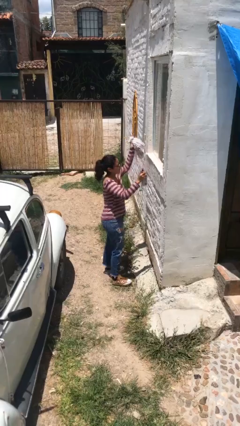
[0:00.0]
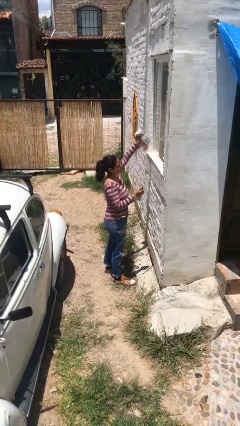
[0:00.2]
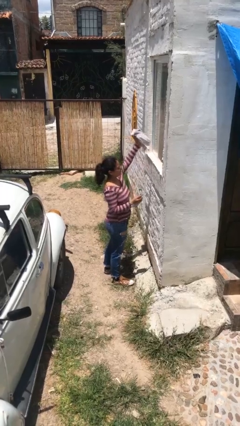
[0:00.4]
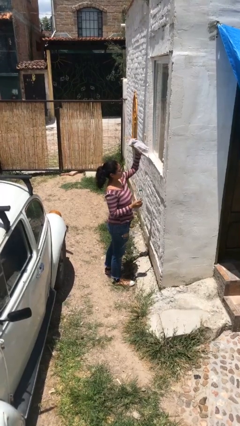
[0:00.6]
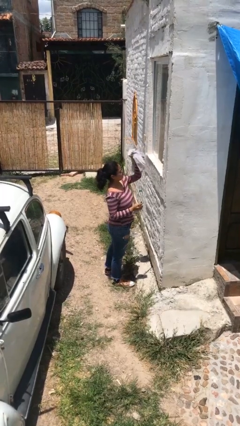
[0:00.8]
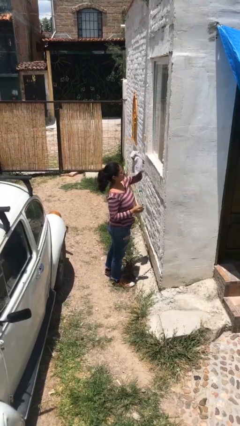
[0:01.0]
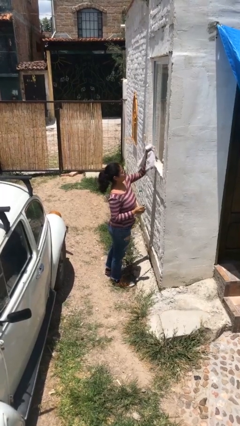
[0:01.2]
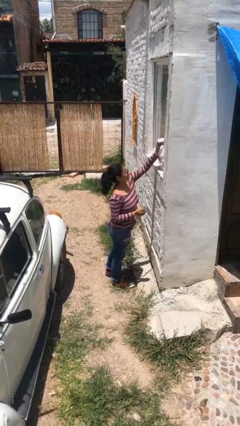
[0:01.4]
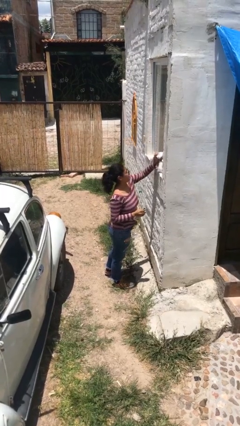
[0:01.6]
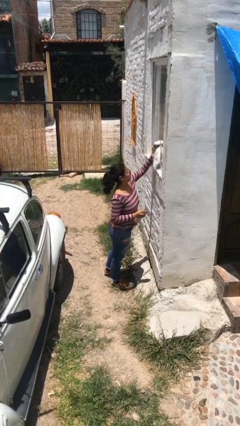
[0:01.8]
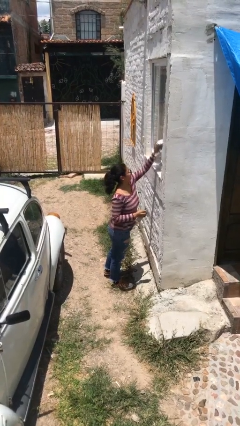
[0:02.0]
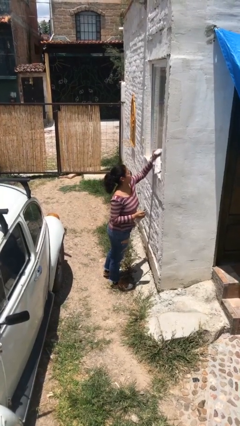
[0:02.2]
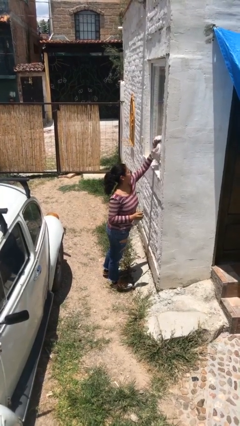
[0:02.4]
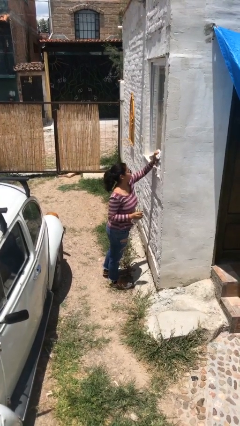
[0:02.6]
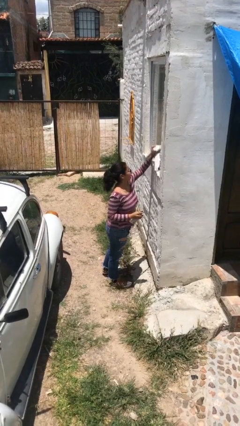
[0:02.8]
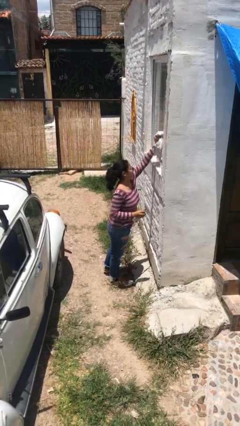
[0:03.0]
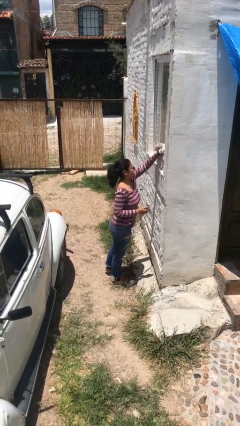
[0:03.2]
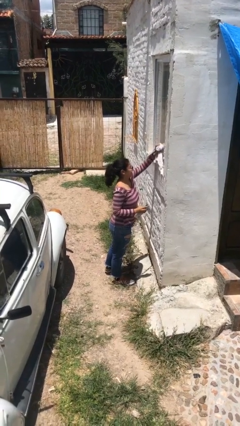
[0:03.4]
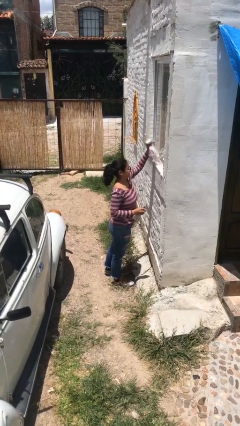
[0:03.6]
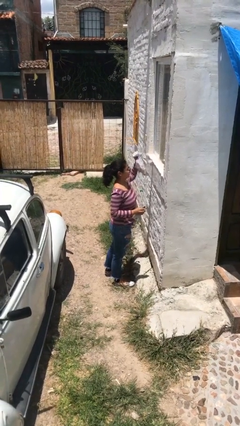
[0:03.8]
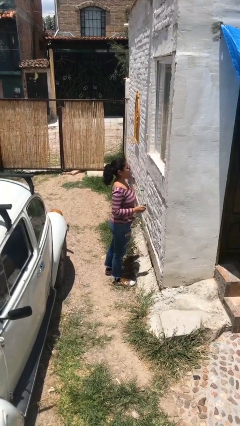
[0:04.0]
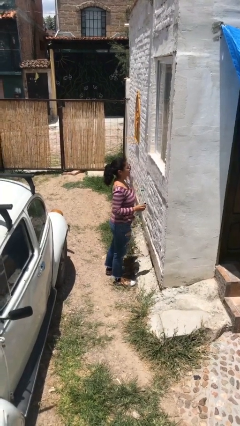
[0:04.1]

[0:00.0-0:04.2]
person washes window

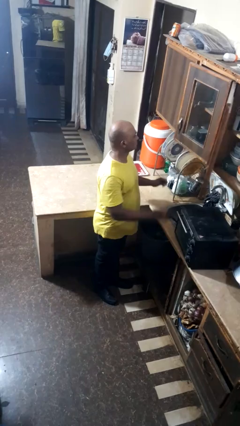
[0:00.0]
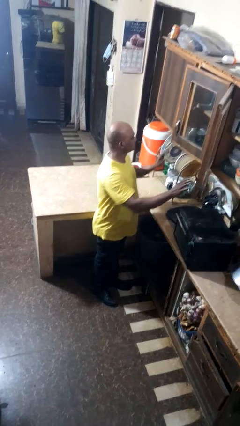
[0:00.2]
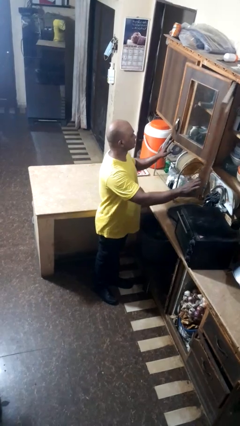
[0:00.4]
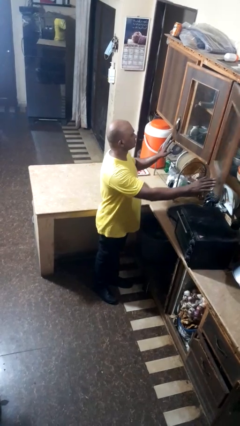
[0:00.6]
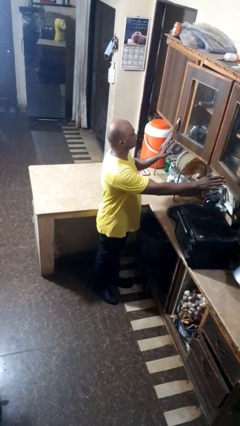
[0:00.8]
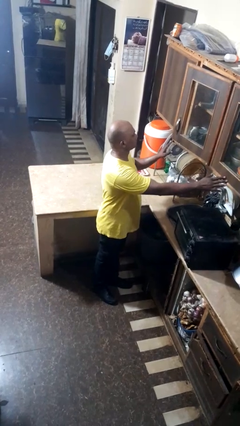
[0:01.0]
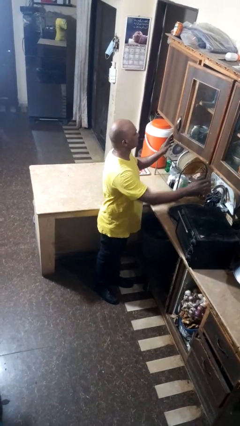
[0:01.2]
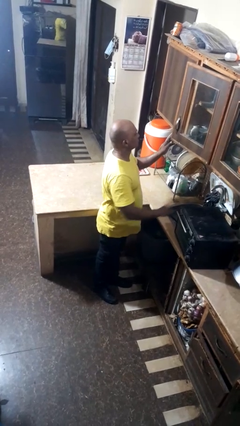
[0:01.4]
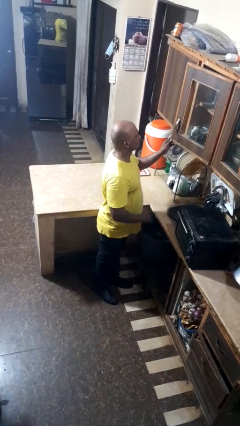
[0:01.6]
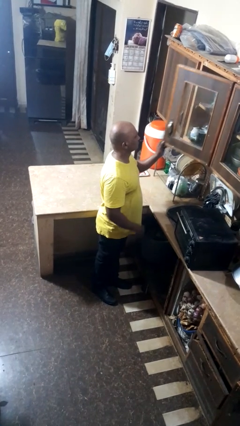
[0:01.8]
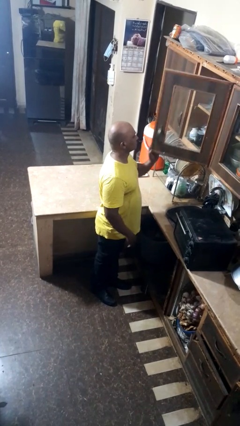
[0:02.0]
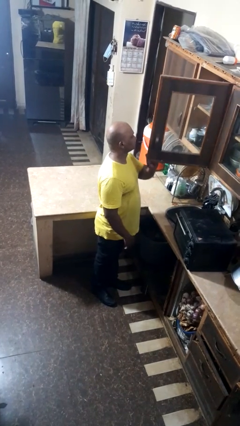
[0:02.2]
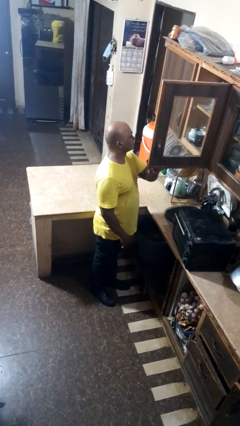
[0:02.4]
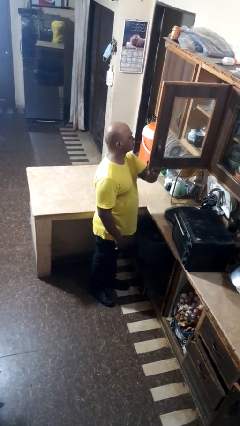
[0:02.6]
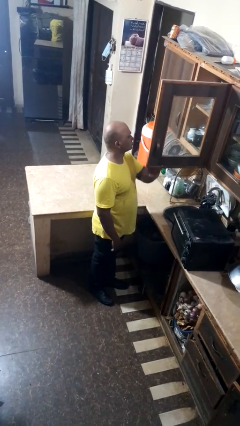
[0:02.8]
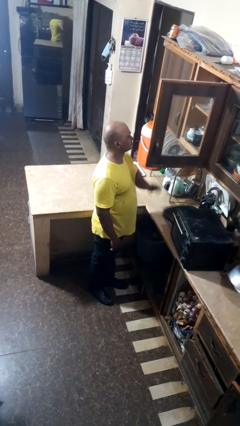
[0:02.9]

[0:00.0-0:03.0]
person opens cabinet

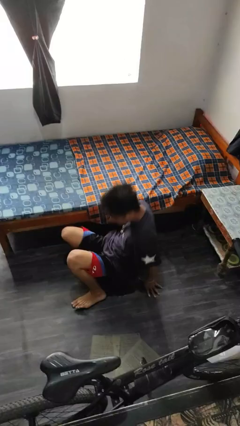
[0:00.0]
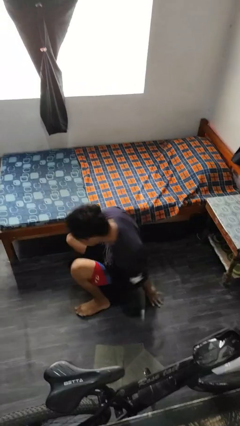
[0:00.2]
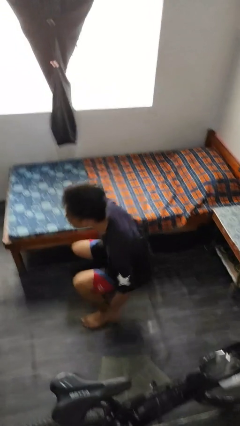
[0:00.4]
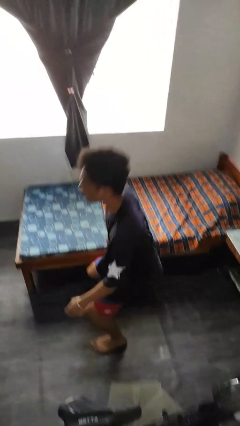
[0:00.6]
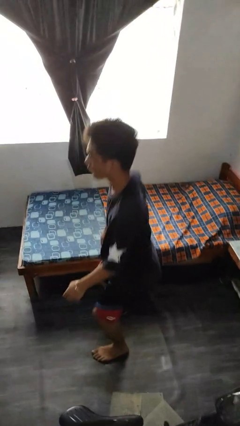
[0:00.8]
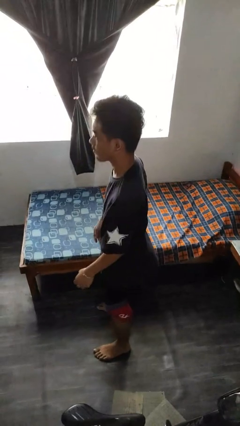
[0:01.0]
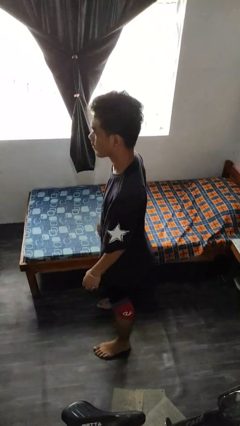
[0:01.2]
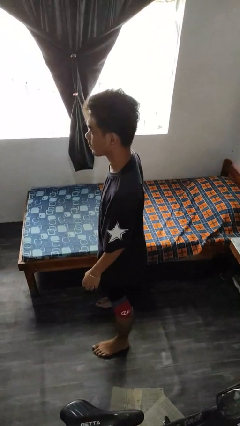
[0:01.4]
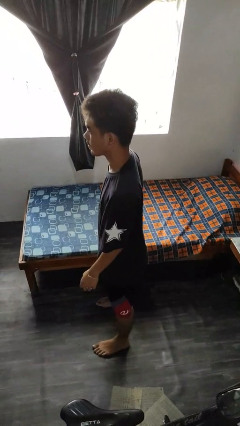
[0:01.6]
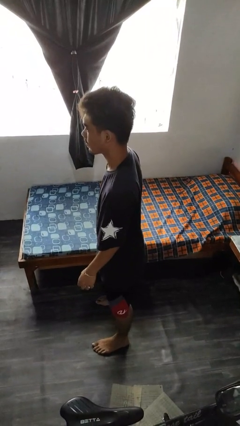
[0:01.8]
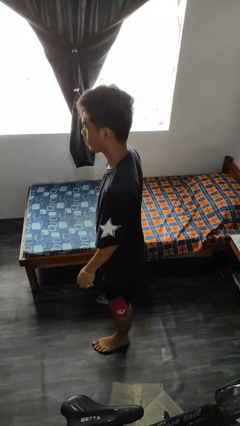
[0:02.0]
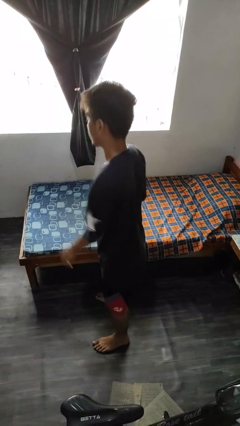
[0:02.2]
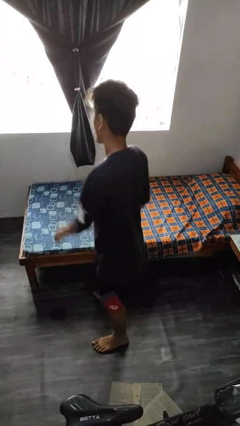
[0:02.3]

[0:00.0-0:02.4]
person stands up from floor

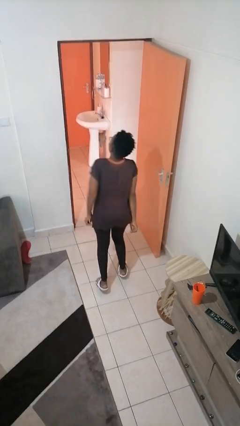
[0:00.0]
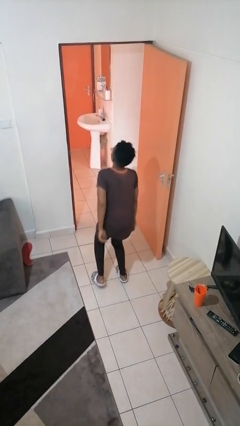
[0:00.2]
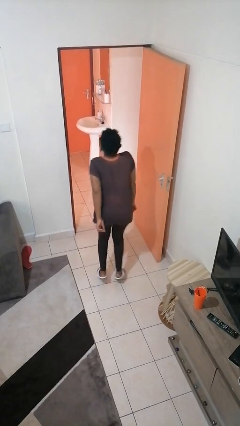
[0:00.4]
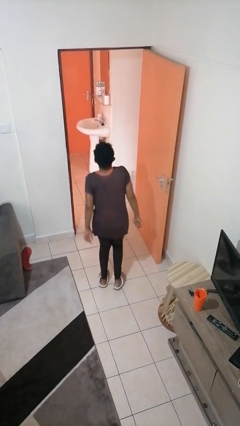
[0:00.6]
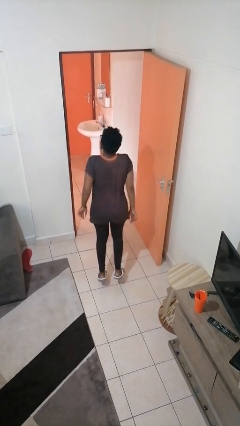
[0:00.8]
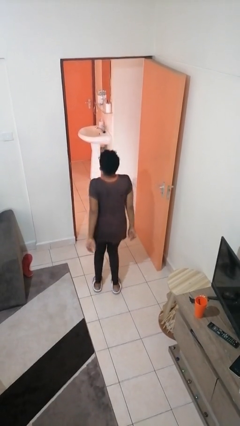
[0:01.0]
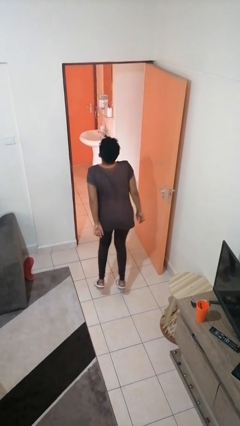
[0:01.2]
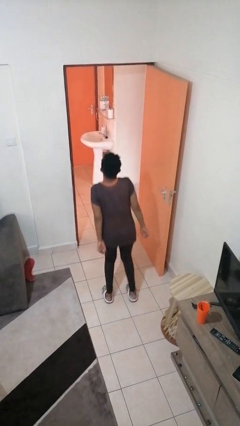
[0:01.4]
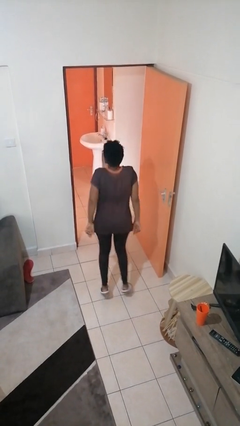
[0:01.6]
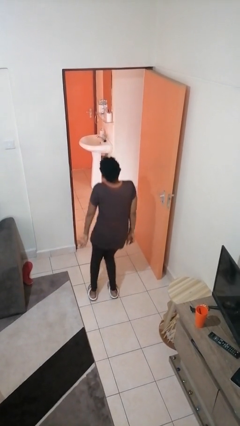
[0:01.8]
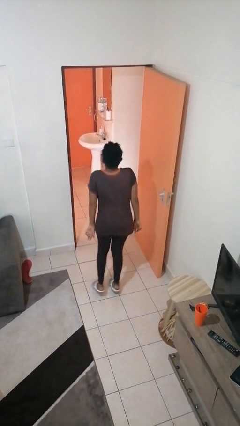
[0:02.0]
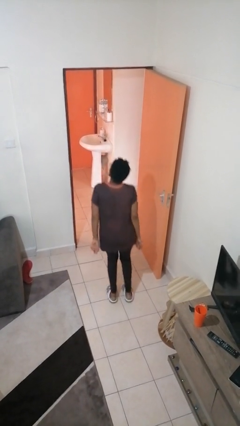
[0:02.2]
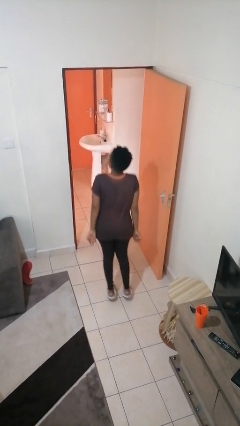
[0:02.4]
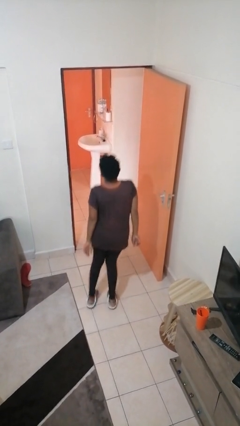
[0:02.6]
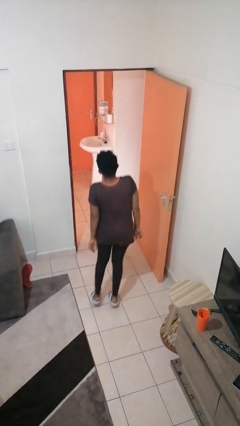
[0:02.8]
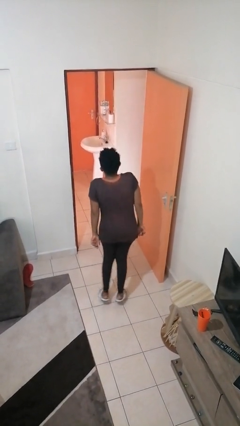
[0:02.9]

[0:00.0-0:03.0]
person jumps

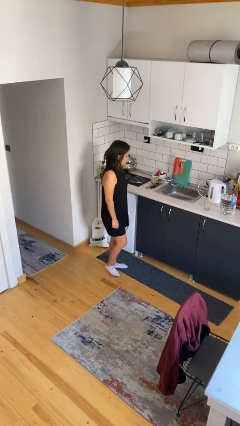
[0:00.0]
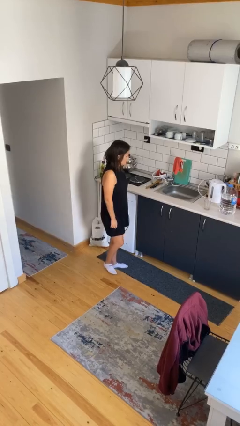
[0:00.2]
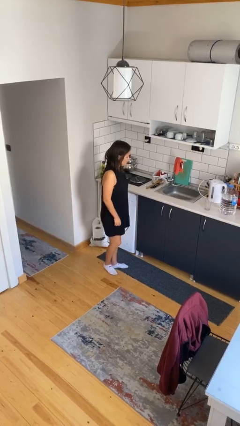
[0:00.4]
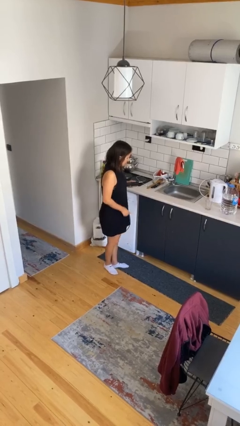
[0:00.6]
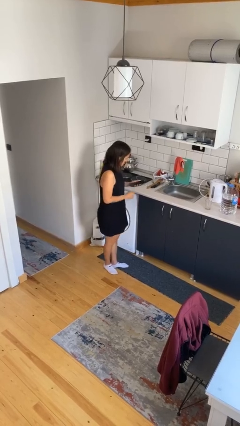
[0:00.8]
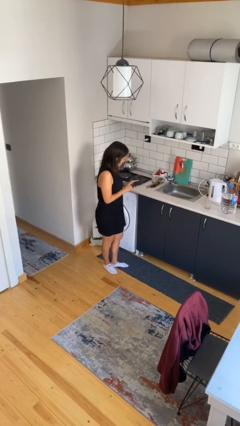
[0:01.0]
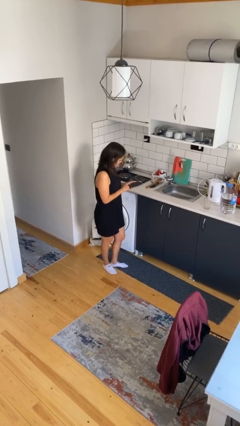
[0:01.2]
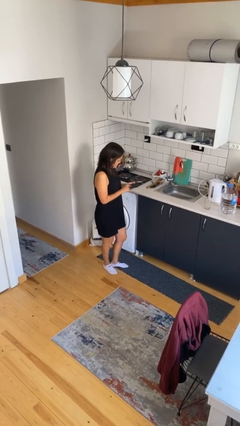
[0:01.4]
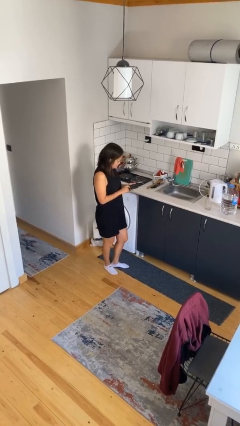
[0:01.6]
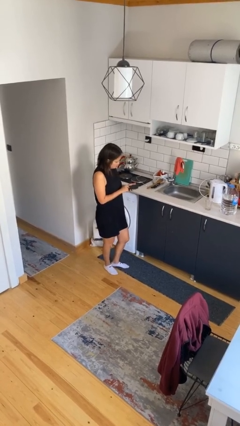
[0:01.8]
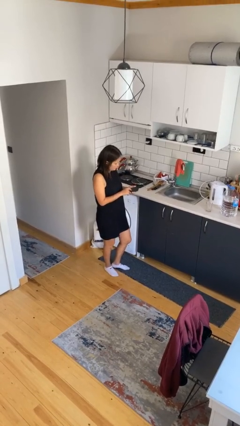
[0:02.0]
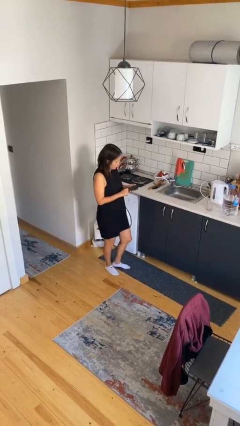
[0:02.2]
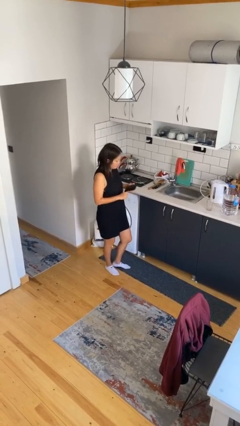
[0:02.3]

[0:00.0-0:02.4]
person takes phone from pocket

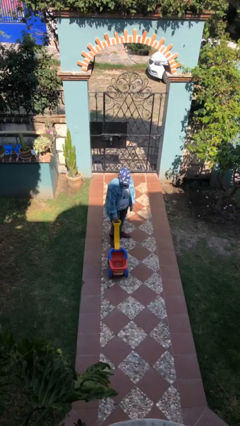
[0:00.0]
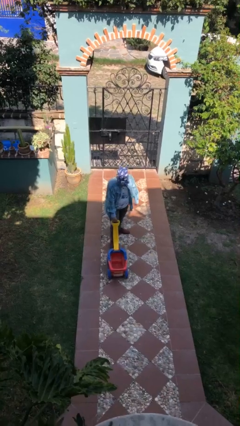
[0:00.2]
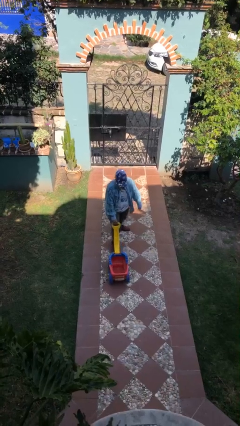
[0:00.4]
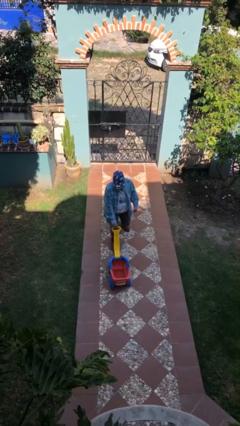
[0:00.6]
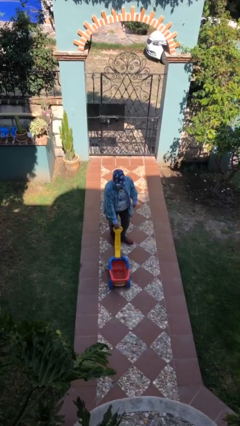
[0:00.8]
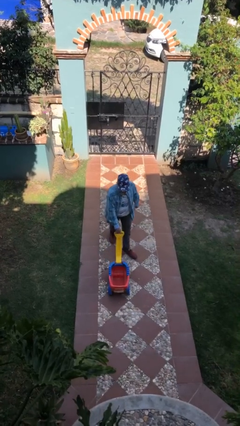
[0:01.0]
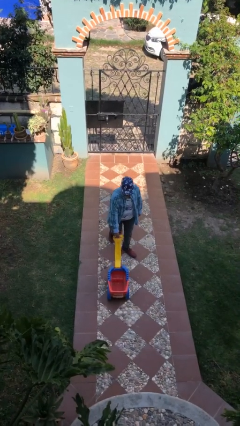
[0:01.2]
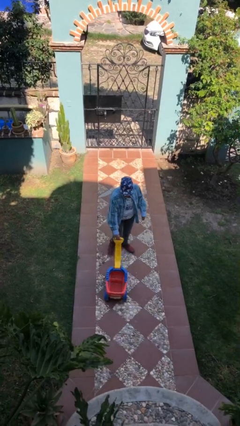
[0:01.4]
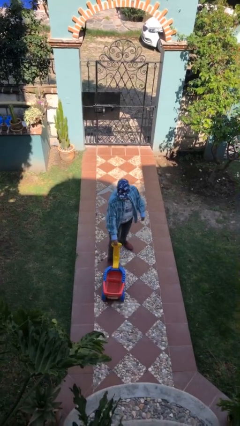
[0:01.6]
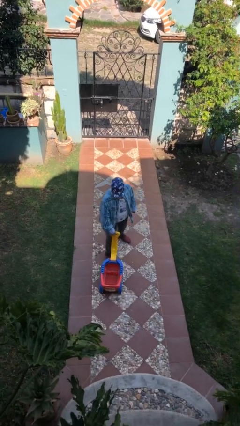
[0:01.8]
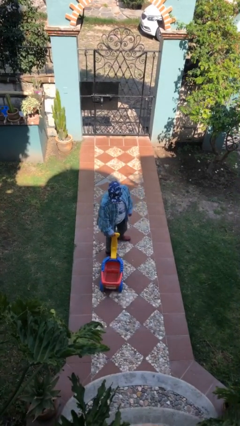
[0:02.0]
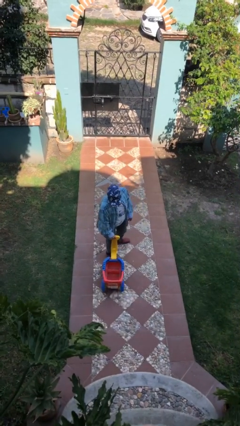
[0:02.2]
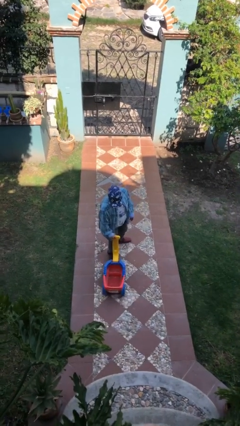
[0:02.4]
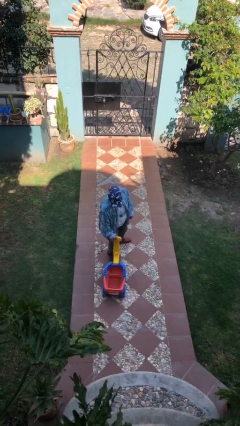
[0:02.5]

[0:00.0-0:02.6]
person pushes wheeled cart

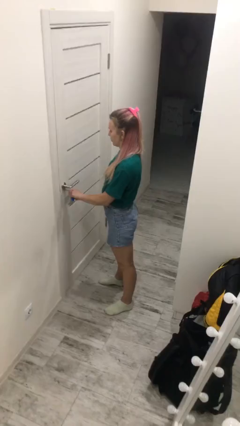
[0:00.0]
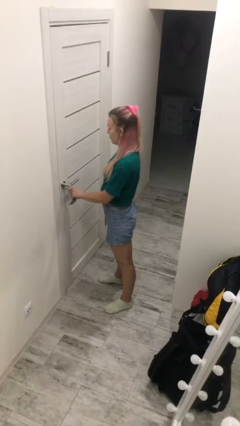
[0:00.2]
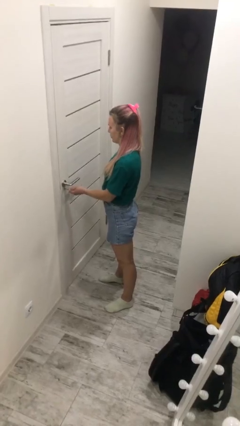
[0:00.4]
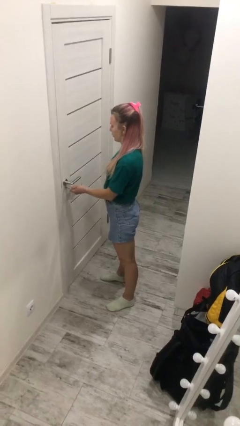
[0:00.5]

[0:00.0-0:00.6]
person locks door with keys
